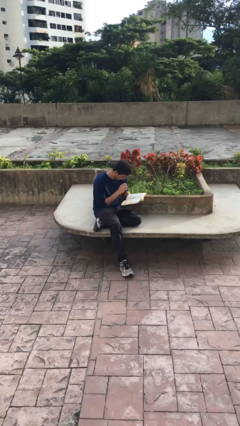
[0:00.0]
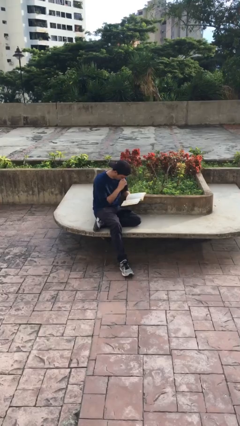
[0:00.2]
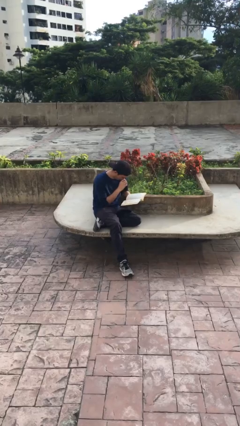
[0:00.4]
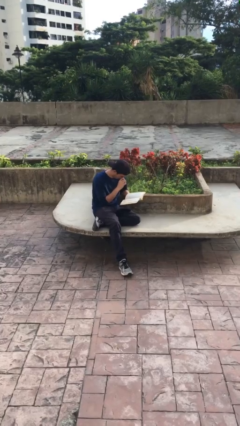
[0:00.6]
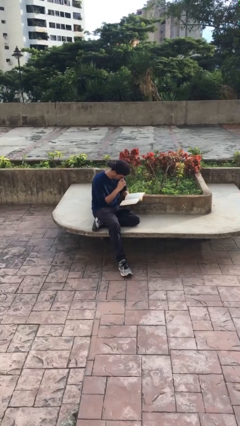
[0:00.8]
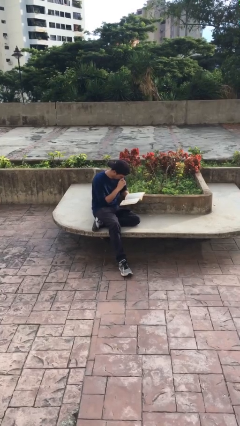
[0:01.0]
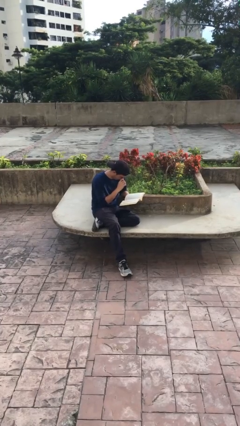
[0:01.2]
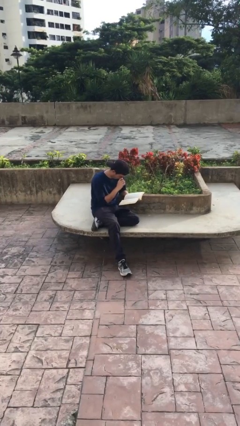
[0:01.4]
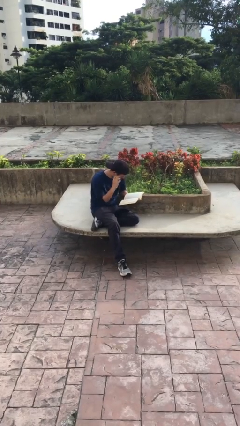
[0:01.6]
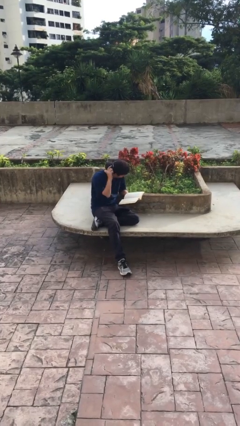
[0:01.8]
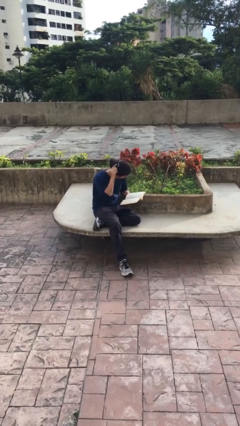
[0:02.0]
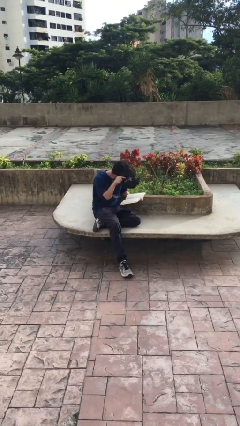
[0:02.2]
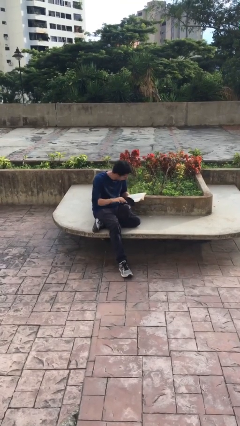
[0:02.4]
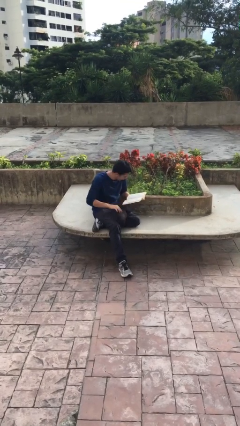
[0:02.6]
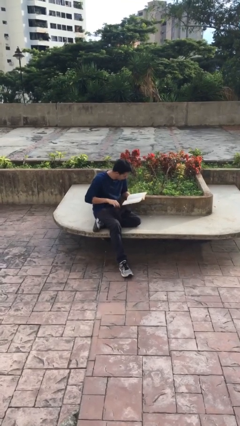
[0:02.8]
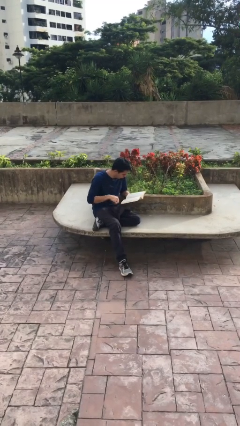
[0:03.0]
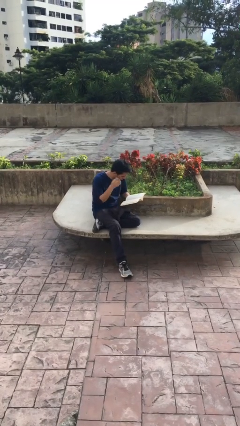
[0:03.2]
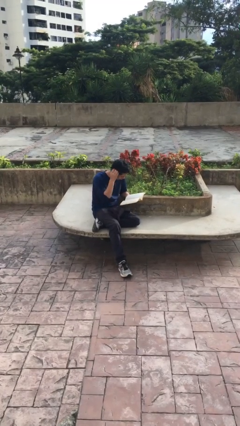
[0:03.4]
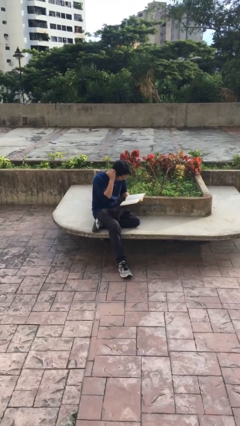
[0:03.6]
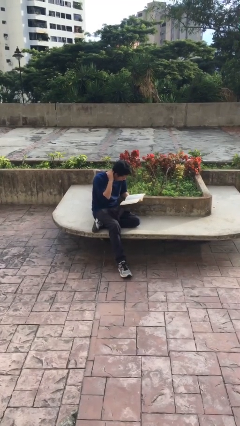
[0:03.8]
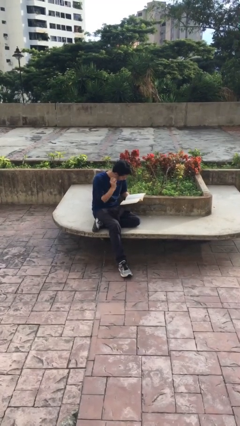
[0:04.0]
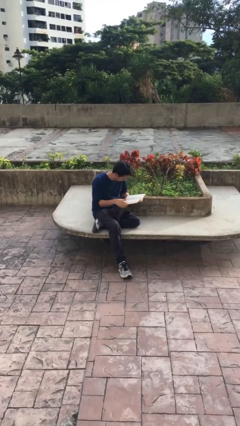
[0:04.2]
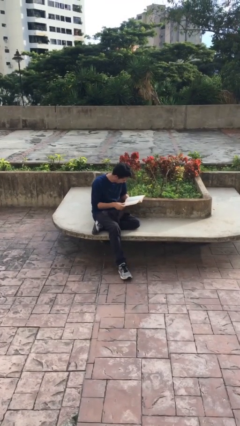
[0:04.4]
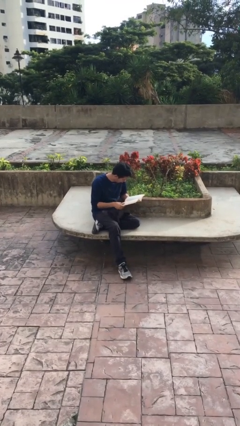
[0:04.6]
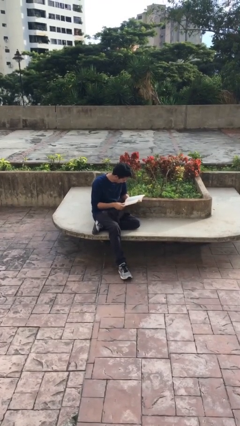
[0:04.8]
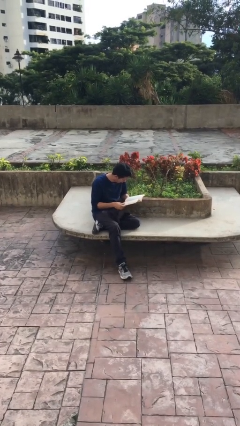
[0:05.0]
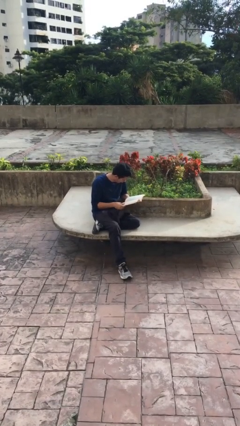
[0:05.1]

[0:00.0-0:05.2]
person reads document

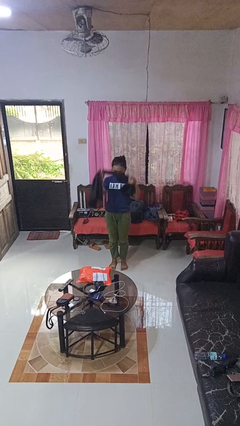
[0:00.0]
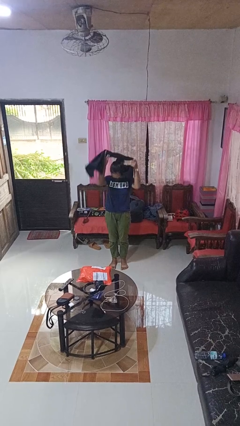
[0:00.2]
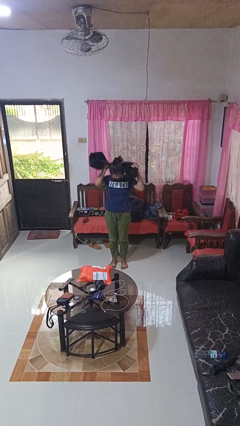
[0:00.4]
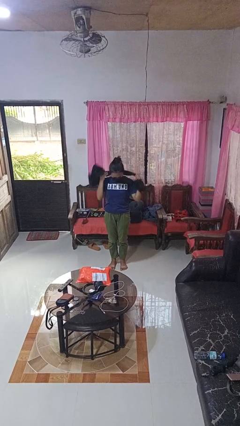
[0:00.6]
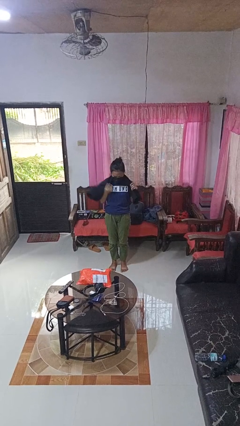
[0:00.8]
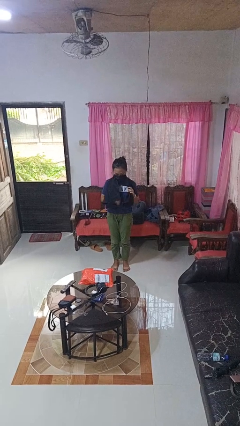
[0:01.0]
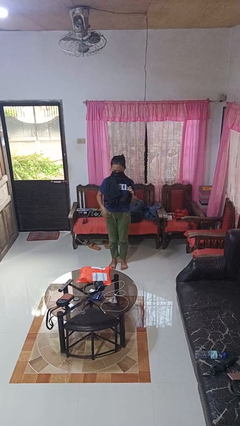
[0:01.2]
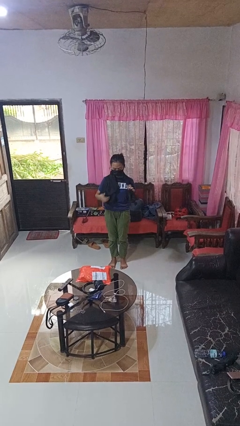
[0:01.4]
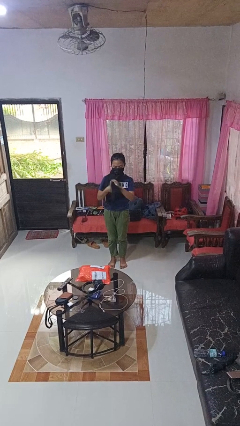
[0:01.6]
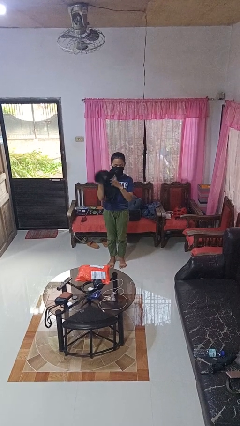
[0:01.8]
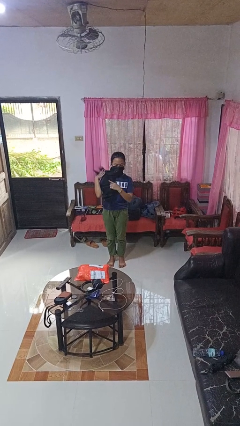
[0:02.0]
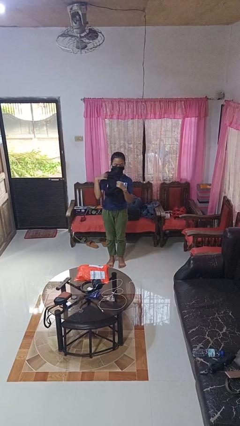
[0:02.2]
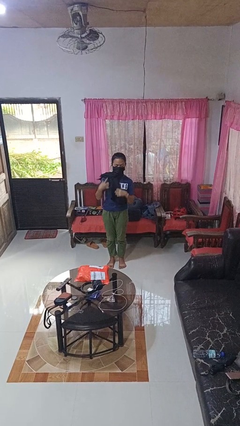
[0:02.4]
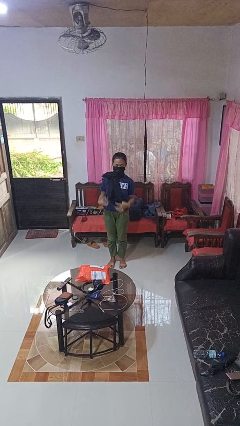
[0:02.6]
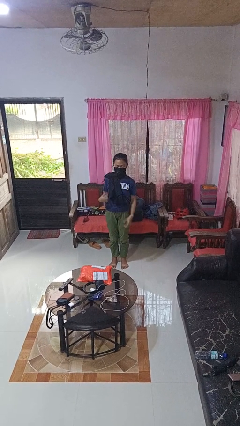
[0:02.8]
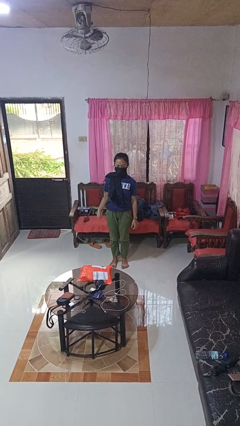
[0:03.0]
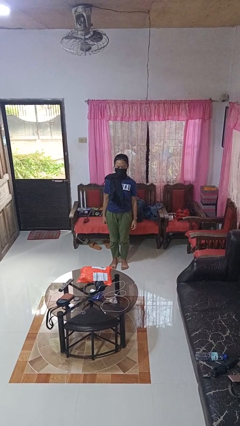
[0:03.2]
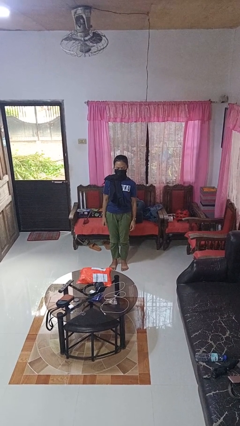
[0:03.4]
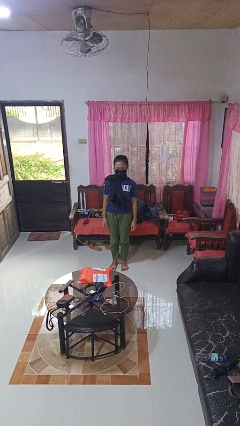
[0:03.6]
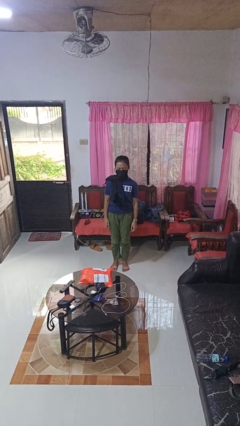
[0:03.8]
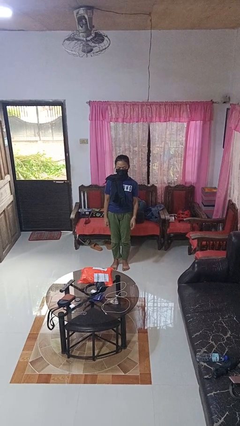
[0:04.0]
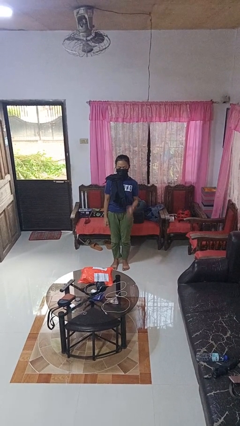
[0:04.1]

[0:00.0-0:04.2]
person puts on scarf

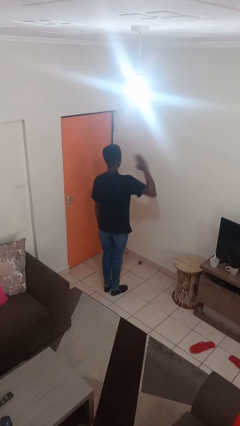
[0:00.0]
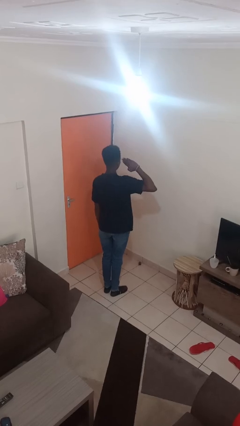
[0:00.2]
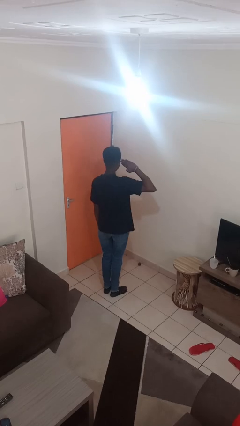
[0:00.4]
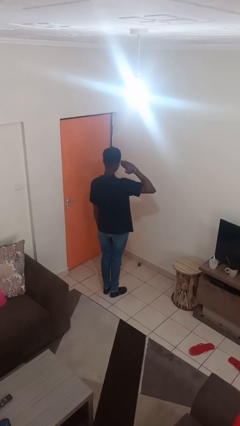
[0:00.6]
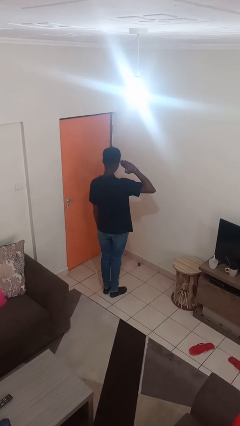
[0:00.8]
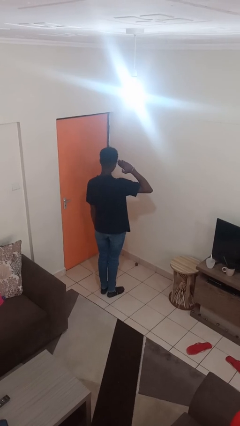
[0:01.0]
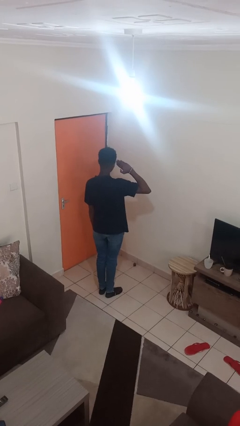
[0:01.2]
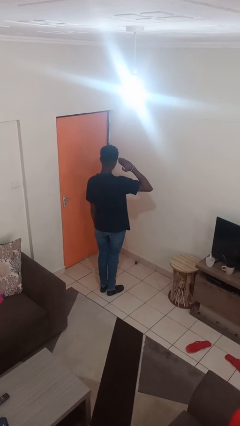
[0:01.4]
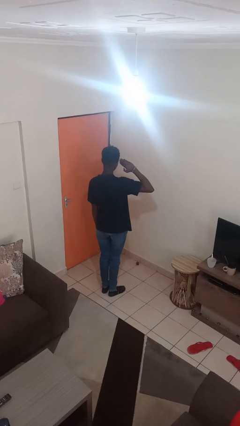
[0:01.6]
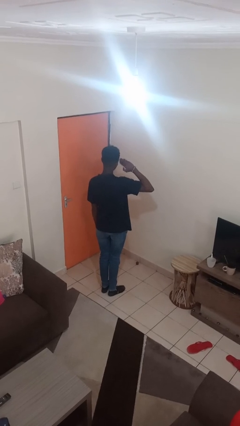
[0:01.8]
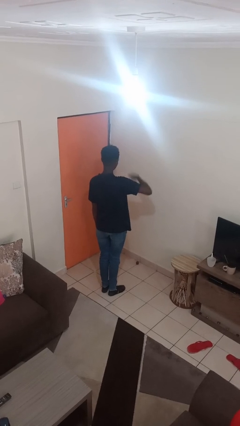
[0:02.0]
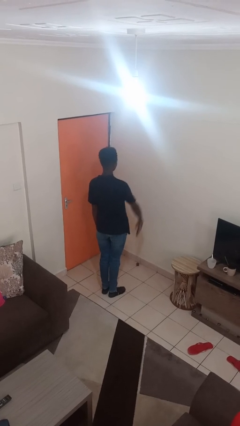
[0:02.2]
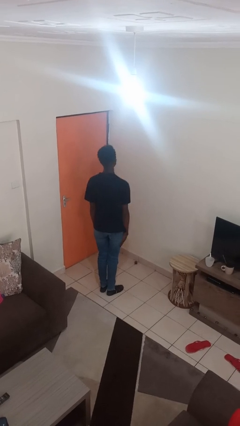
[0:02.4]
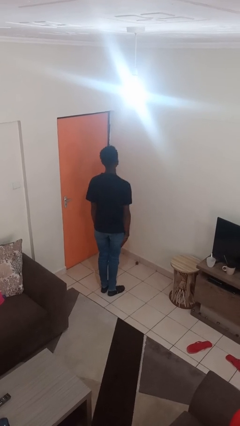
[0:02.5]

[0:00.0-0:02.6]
person salutes

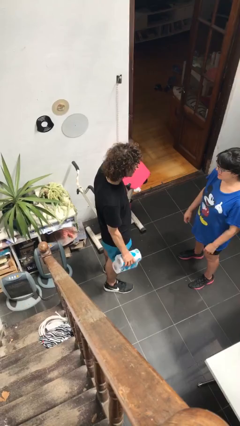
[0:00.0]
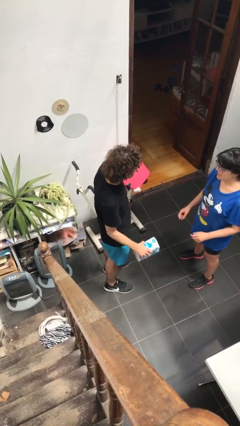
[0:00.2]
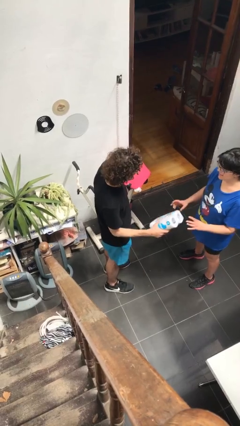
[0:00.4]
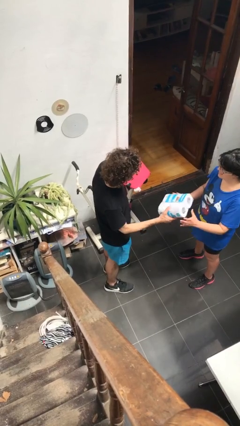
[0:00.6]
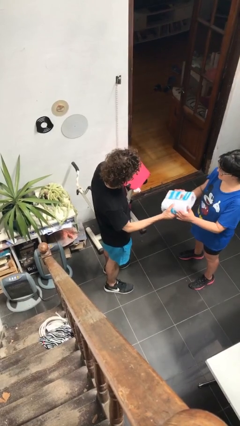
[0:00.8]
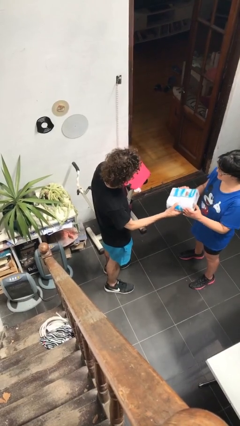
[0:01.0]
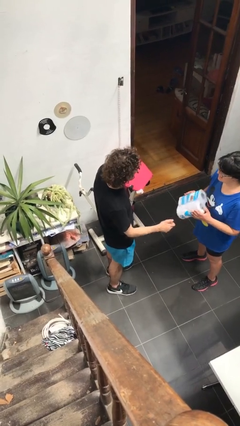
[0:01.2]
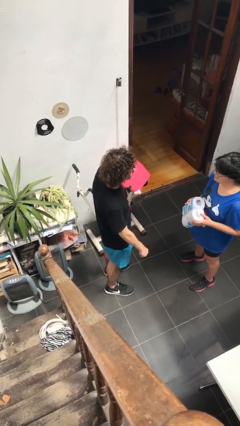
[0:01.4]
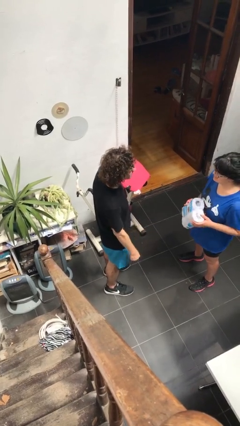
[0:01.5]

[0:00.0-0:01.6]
person transfers object to person

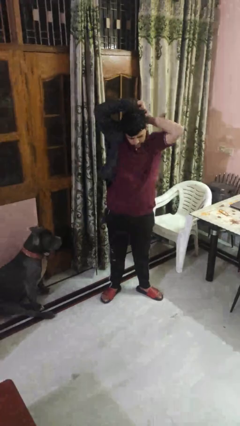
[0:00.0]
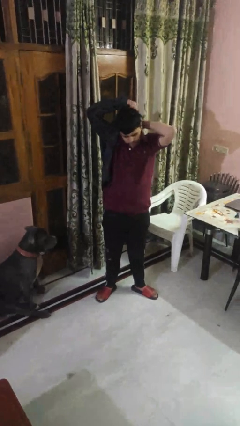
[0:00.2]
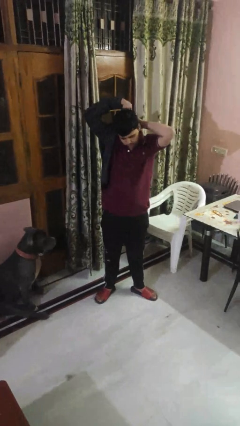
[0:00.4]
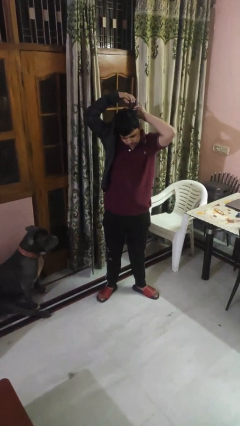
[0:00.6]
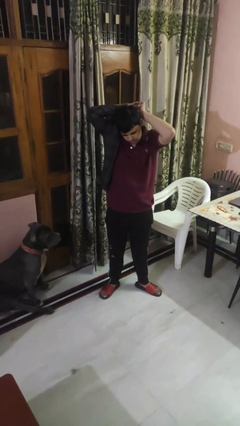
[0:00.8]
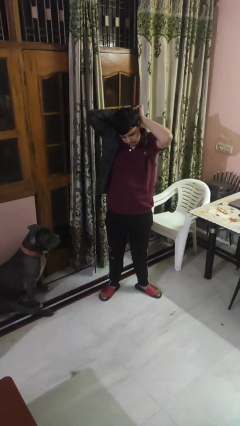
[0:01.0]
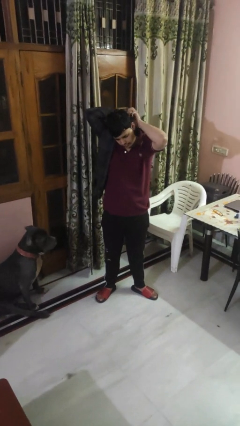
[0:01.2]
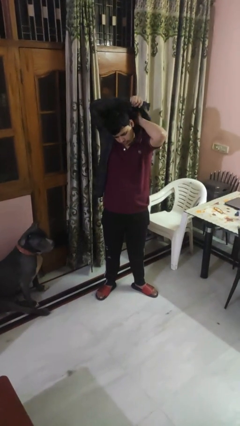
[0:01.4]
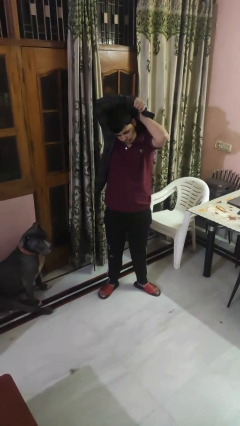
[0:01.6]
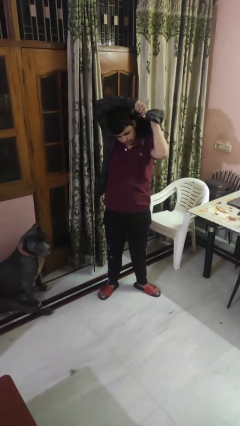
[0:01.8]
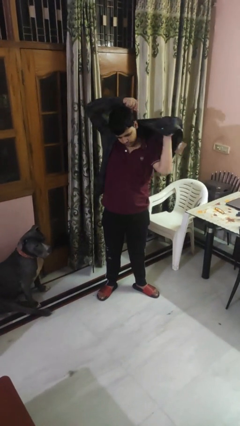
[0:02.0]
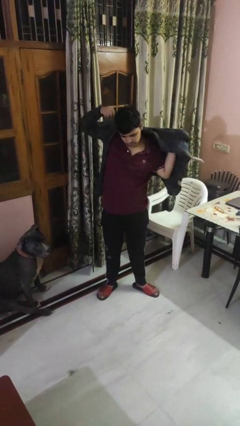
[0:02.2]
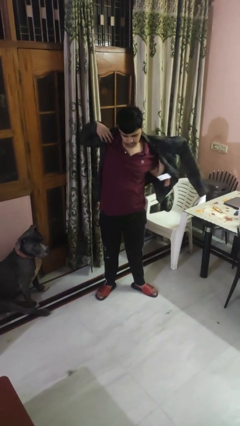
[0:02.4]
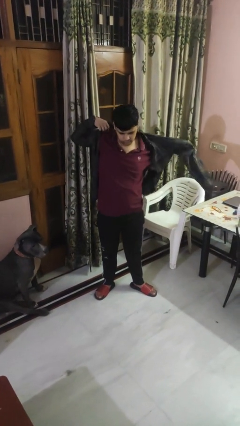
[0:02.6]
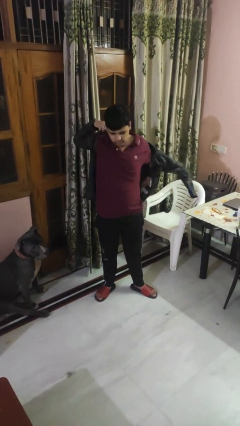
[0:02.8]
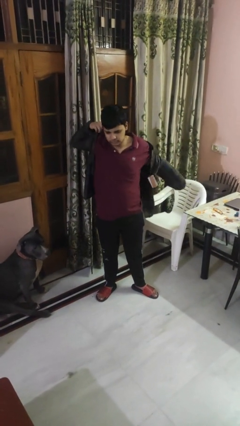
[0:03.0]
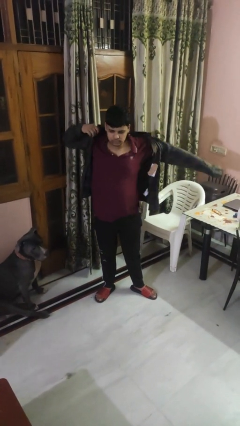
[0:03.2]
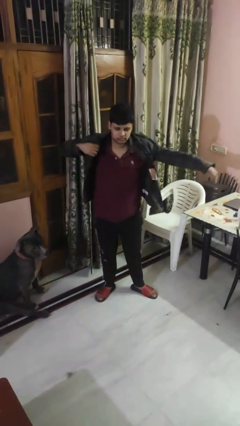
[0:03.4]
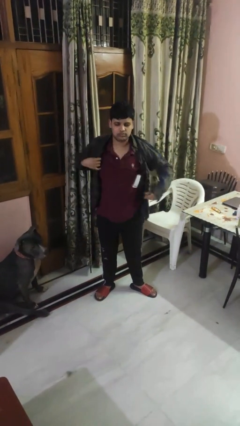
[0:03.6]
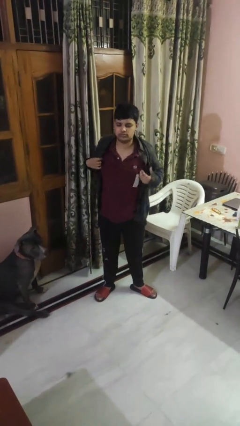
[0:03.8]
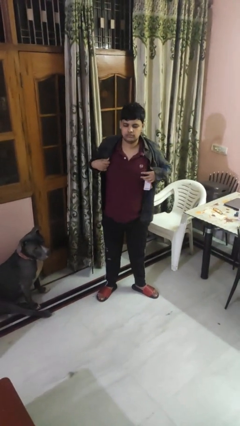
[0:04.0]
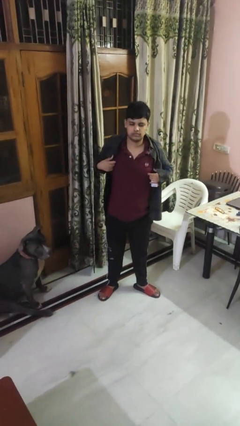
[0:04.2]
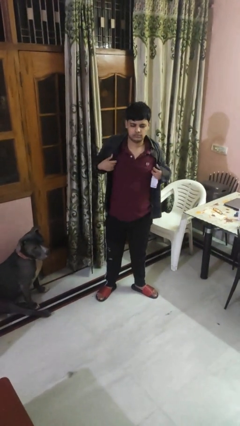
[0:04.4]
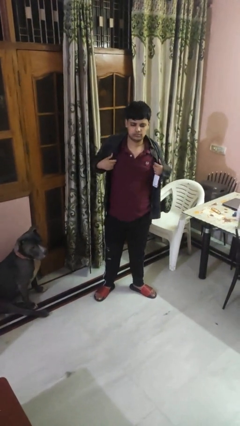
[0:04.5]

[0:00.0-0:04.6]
person puts on shirt
